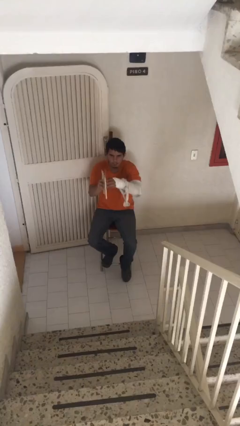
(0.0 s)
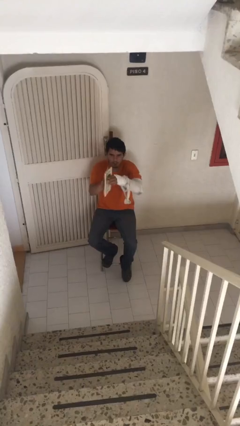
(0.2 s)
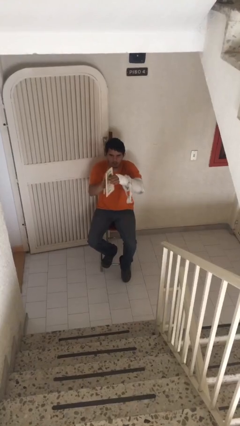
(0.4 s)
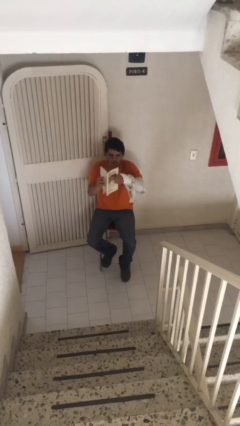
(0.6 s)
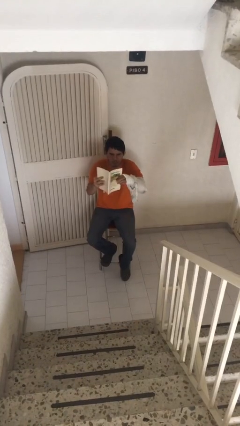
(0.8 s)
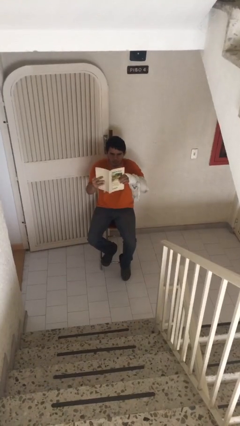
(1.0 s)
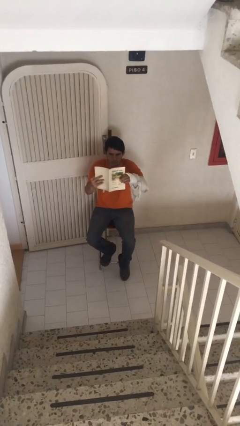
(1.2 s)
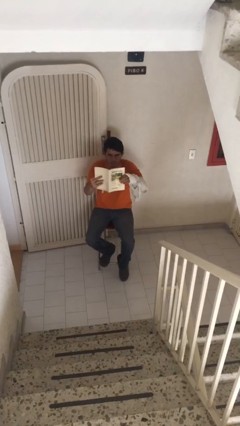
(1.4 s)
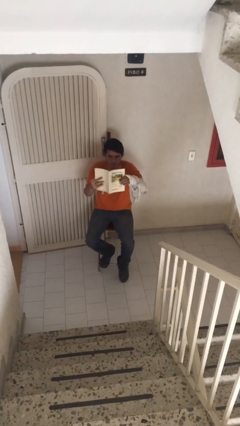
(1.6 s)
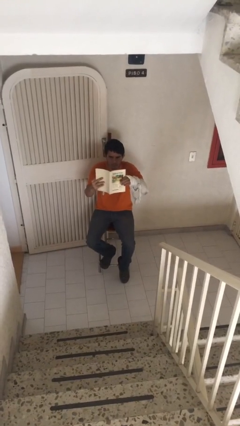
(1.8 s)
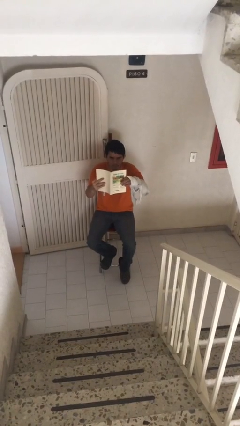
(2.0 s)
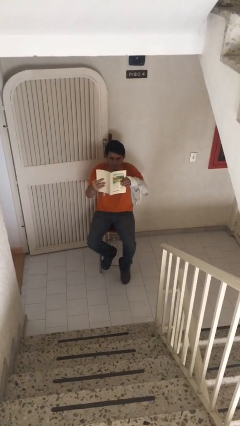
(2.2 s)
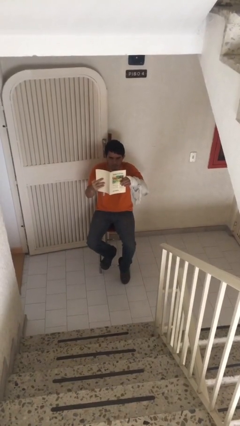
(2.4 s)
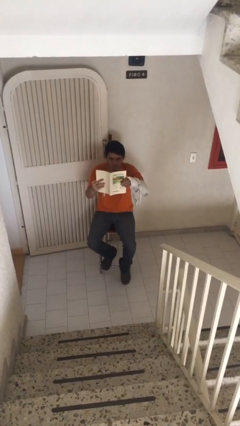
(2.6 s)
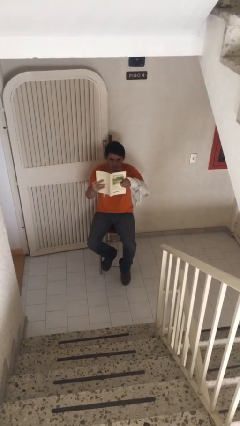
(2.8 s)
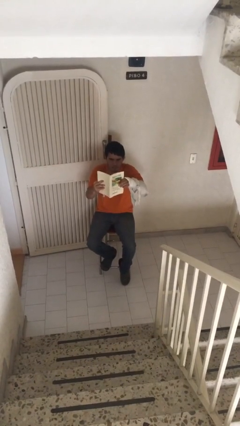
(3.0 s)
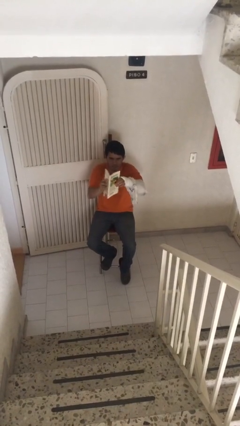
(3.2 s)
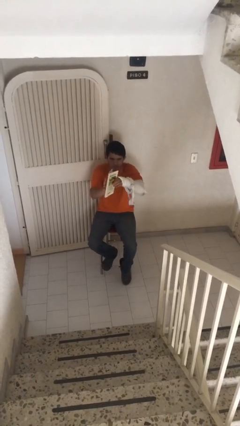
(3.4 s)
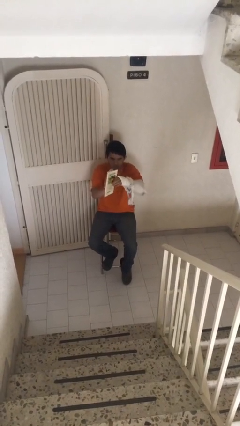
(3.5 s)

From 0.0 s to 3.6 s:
person reads document

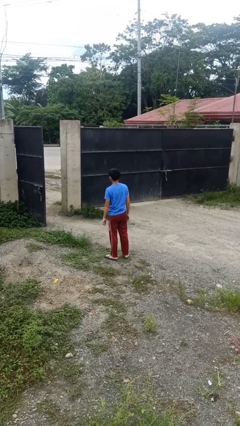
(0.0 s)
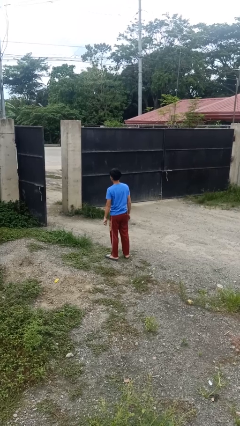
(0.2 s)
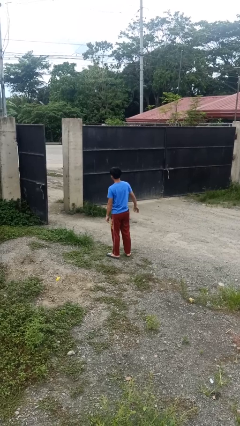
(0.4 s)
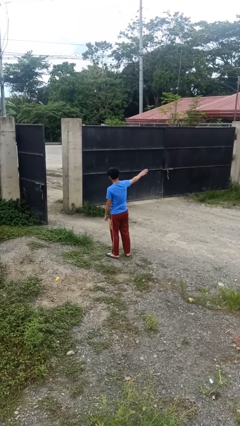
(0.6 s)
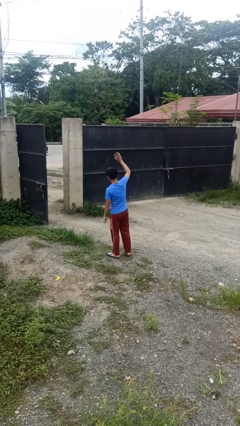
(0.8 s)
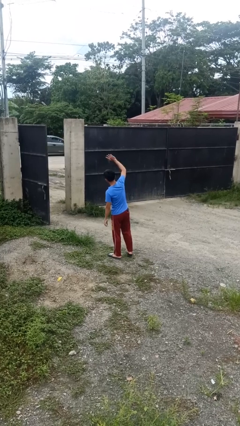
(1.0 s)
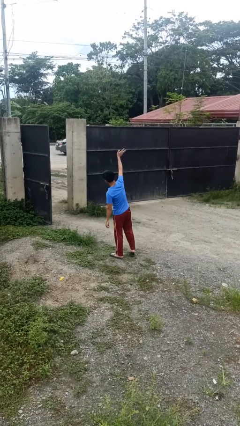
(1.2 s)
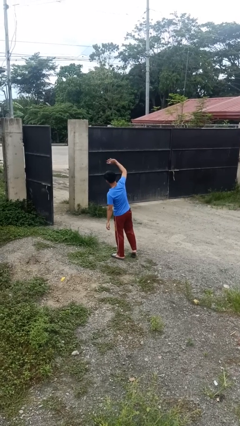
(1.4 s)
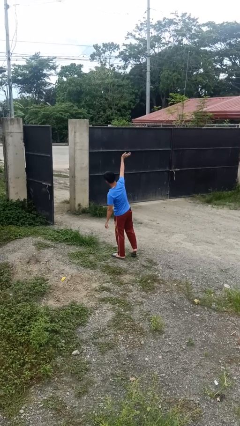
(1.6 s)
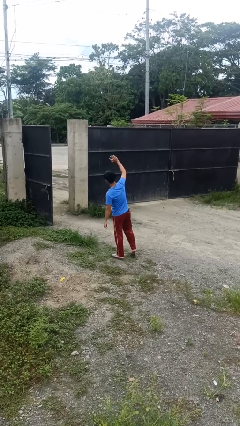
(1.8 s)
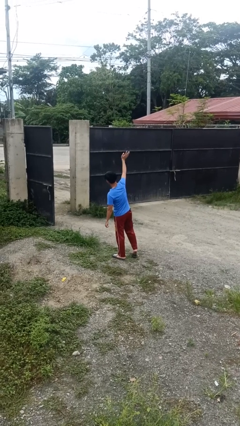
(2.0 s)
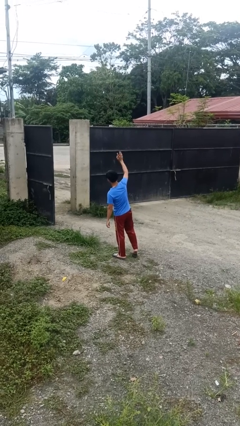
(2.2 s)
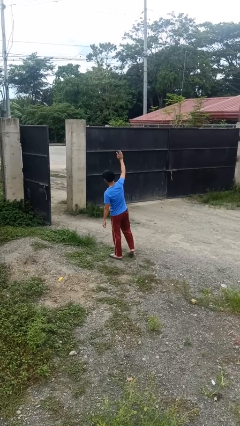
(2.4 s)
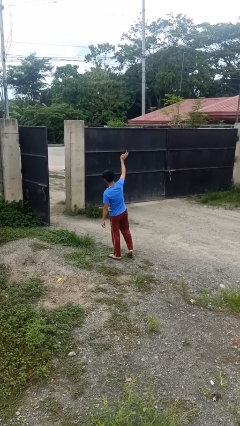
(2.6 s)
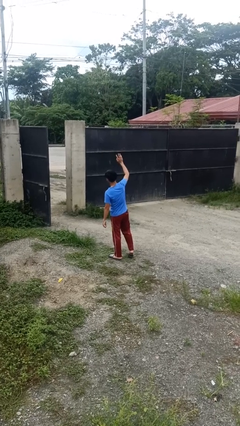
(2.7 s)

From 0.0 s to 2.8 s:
person waves at person

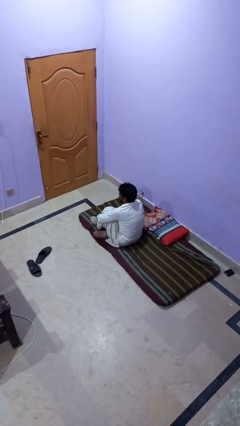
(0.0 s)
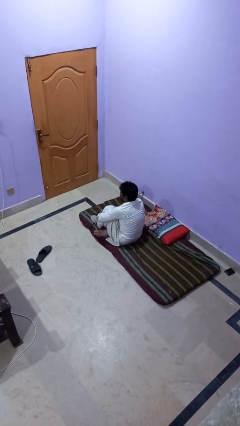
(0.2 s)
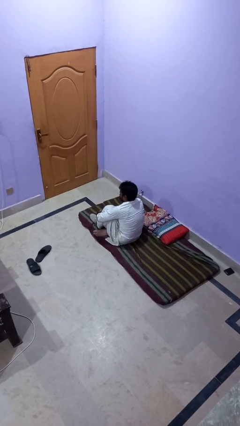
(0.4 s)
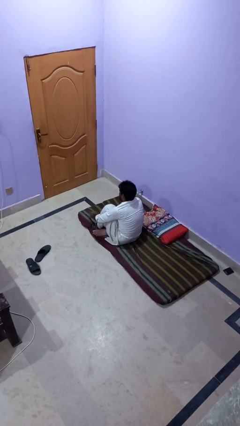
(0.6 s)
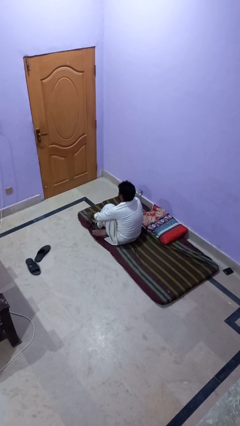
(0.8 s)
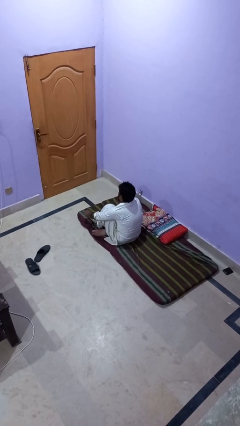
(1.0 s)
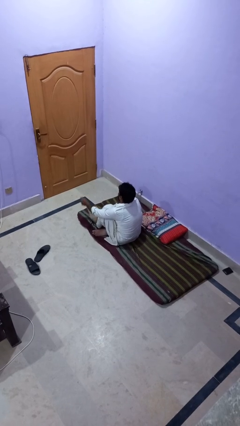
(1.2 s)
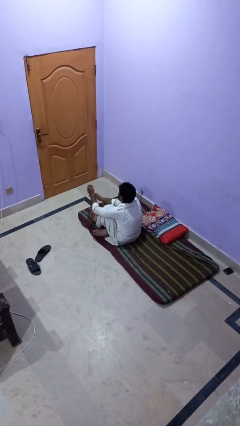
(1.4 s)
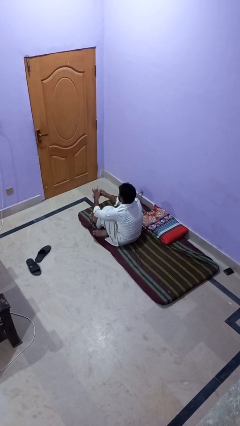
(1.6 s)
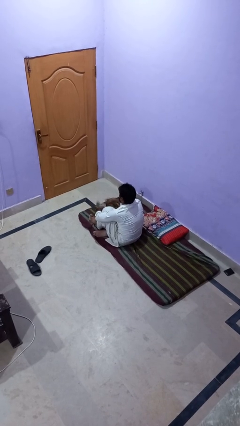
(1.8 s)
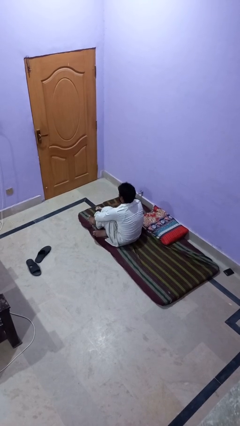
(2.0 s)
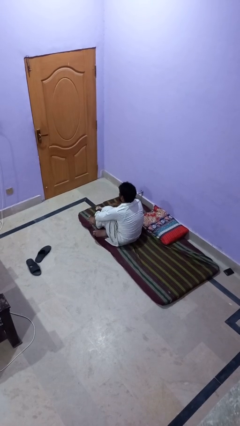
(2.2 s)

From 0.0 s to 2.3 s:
person takes off socks

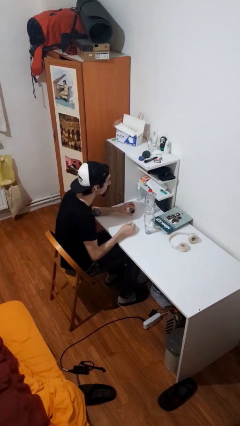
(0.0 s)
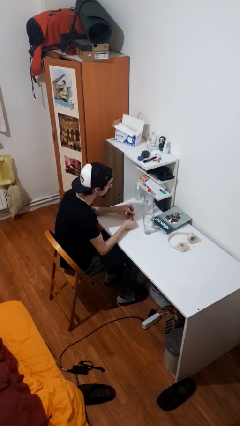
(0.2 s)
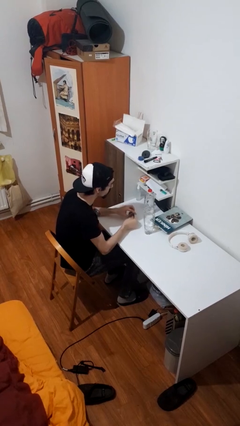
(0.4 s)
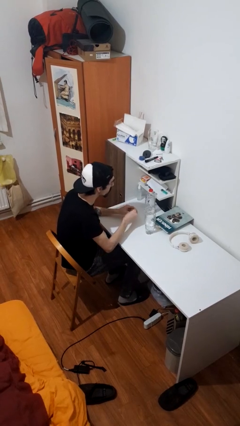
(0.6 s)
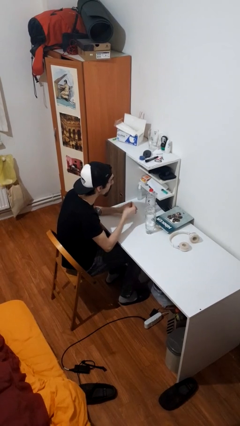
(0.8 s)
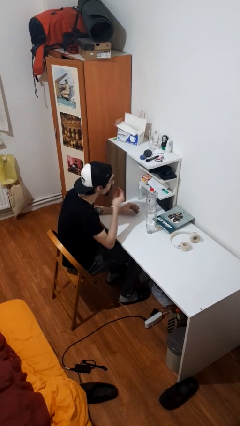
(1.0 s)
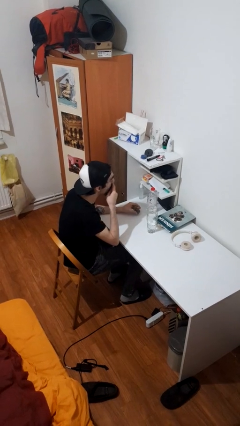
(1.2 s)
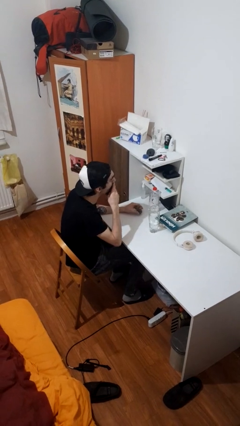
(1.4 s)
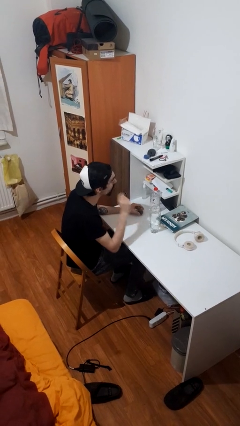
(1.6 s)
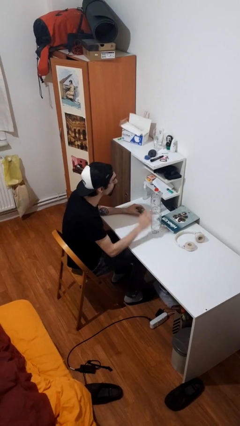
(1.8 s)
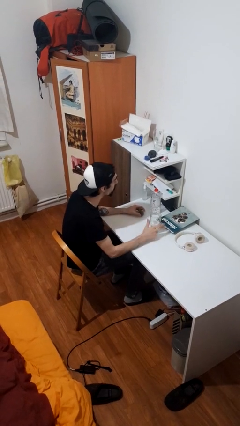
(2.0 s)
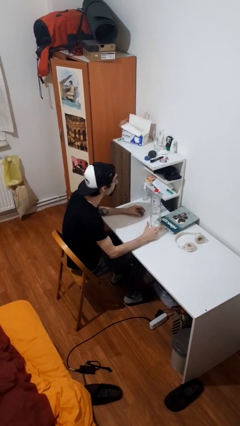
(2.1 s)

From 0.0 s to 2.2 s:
person takes medicine pills

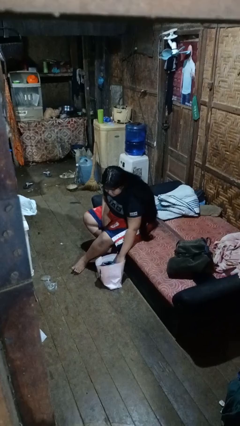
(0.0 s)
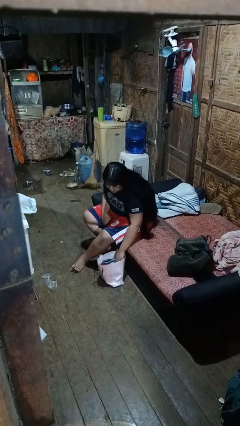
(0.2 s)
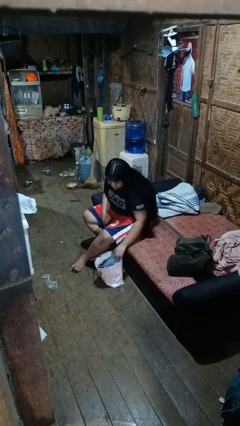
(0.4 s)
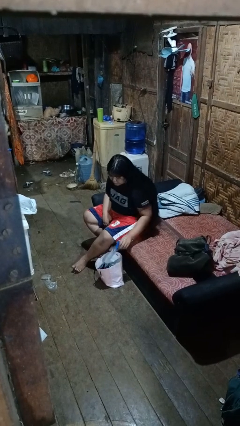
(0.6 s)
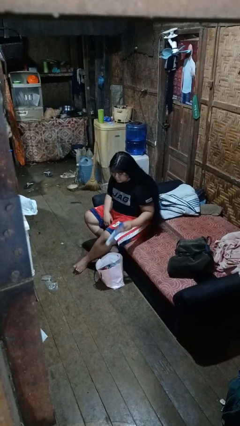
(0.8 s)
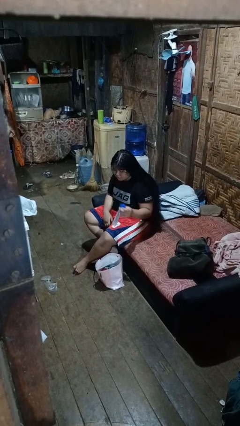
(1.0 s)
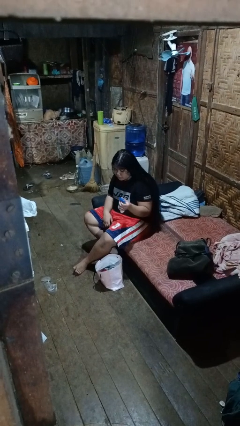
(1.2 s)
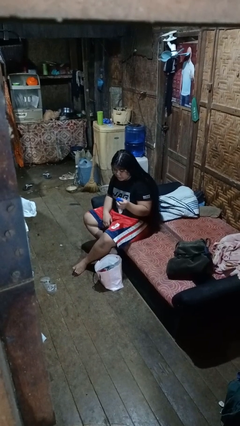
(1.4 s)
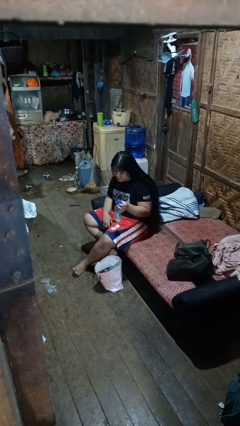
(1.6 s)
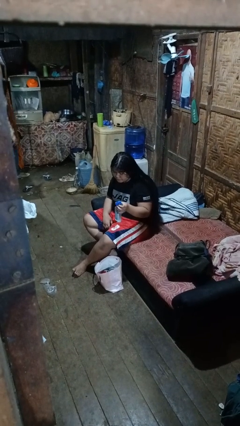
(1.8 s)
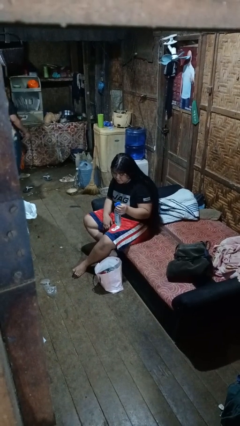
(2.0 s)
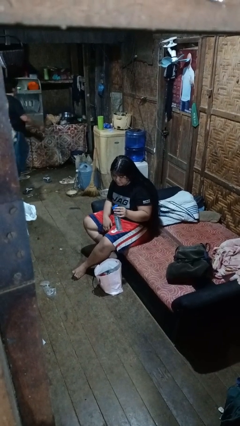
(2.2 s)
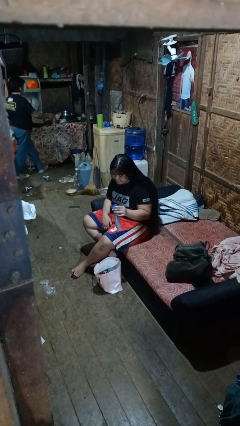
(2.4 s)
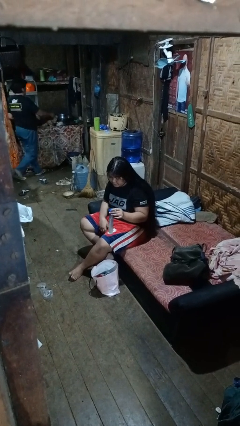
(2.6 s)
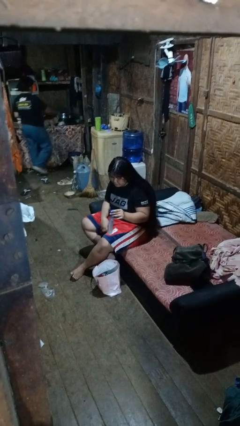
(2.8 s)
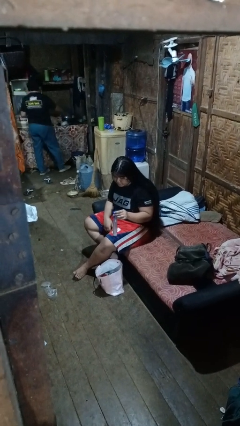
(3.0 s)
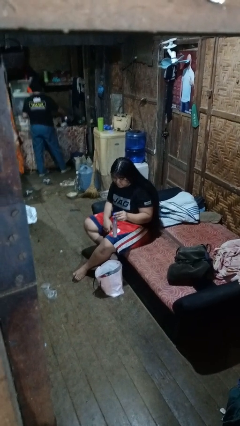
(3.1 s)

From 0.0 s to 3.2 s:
person takes object from bag

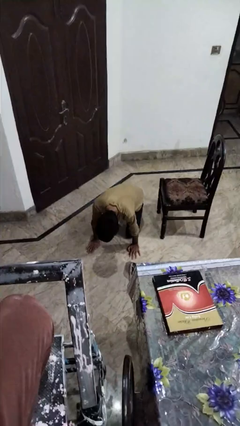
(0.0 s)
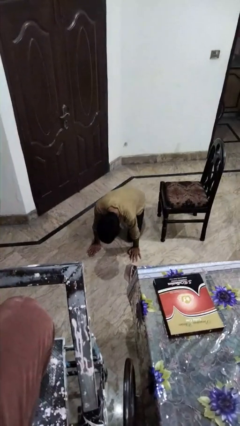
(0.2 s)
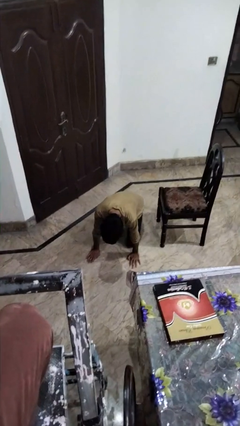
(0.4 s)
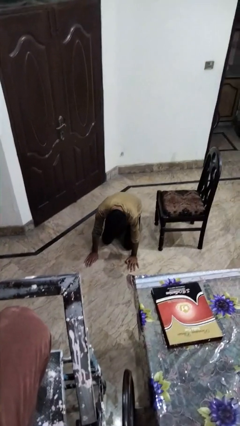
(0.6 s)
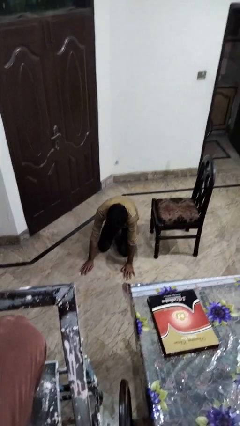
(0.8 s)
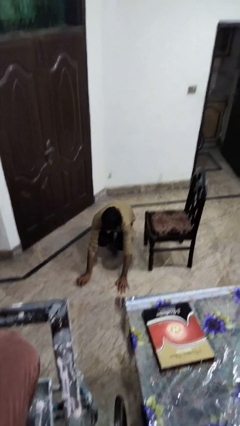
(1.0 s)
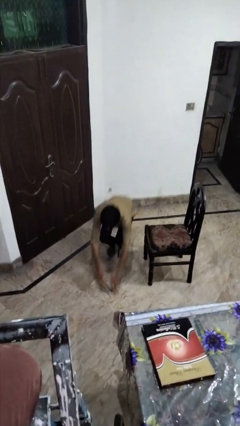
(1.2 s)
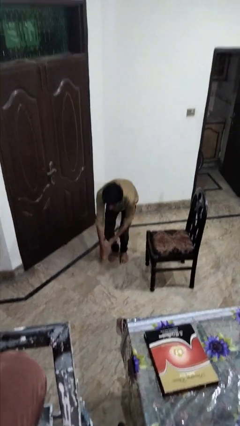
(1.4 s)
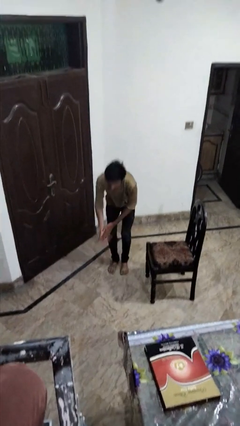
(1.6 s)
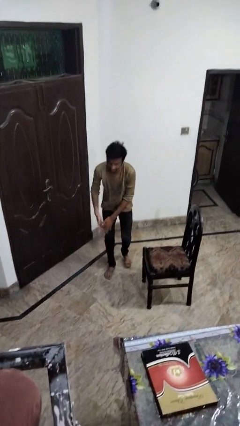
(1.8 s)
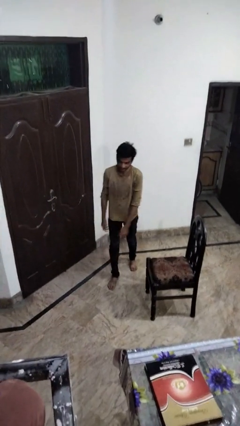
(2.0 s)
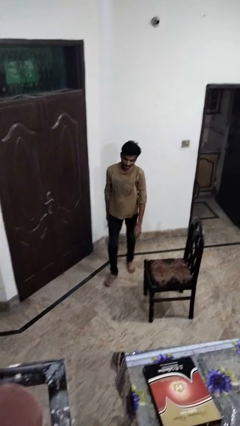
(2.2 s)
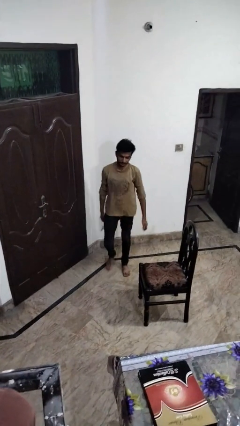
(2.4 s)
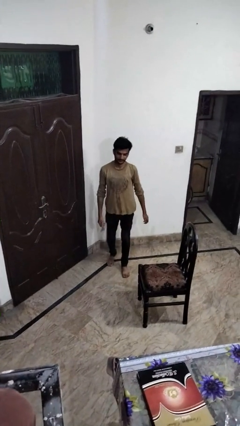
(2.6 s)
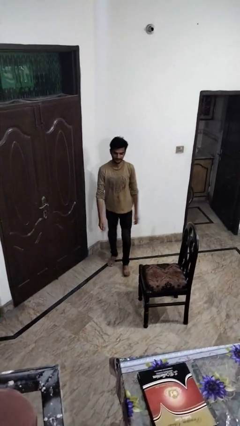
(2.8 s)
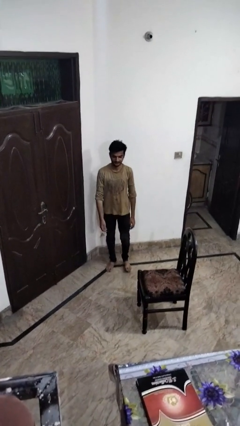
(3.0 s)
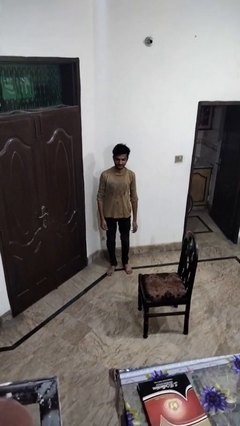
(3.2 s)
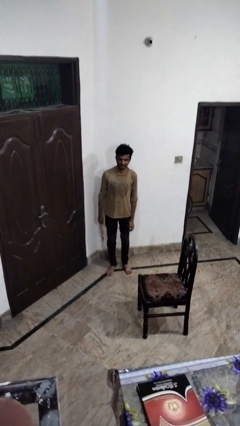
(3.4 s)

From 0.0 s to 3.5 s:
person stands up from floor

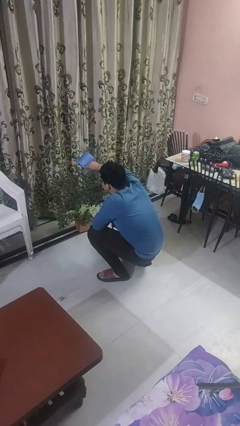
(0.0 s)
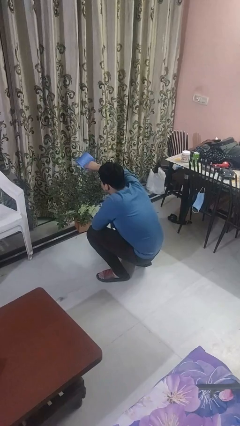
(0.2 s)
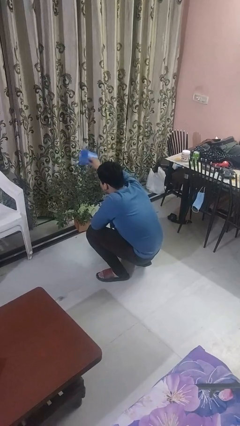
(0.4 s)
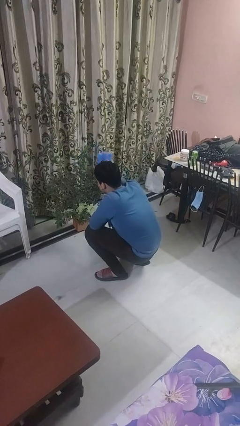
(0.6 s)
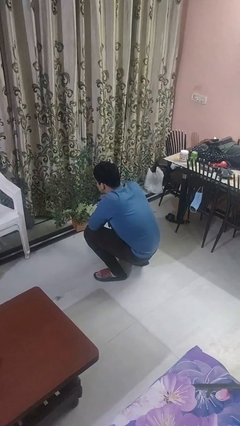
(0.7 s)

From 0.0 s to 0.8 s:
person waters houseplant
